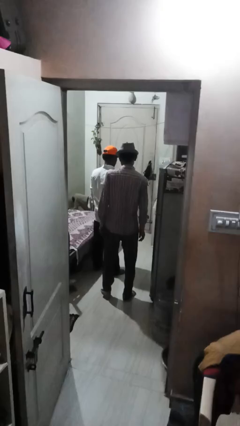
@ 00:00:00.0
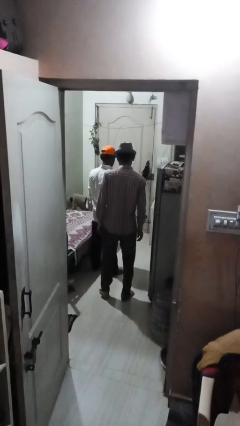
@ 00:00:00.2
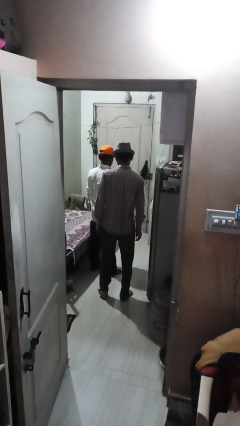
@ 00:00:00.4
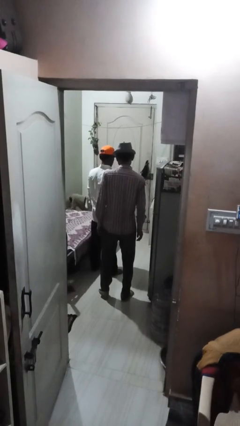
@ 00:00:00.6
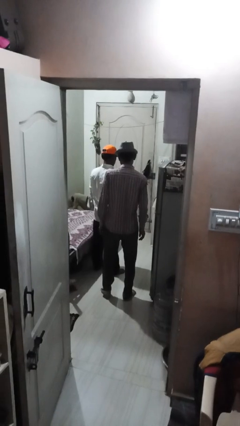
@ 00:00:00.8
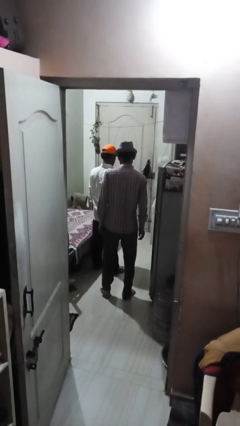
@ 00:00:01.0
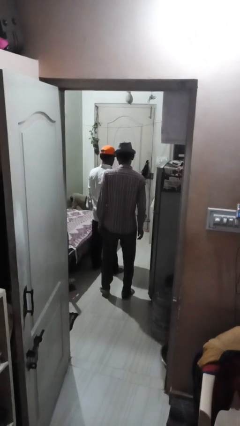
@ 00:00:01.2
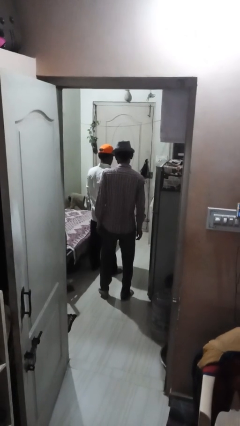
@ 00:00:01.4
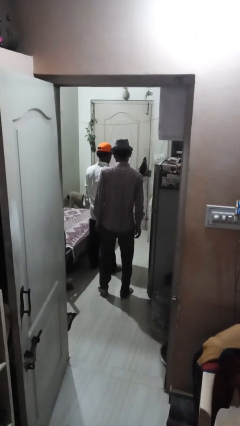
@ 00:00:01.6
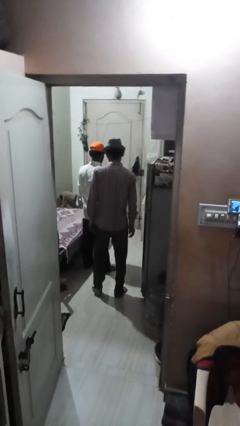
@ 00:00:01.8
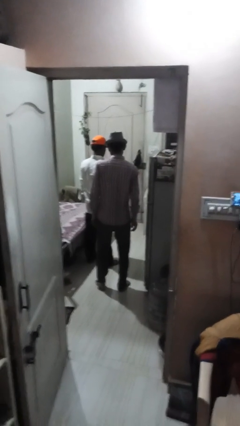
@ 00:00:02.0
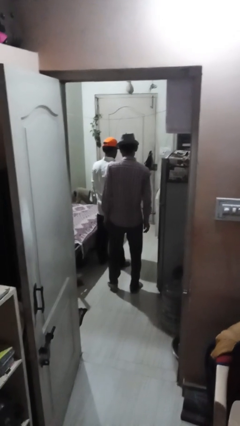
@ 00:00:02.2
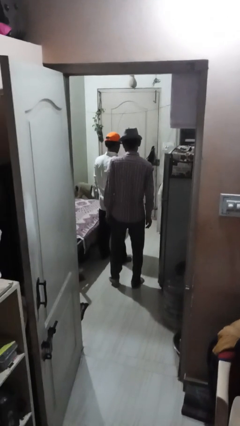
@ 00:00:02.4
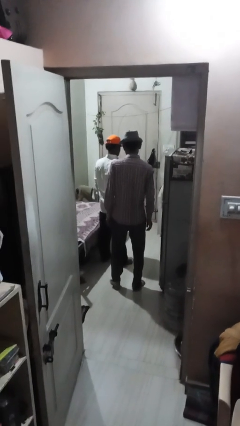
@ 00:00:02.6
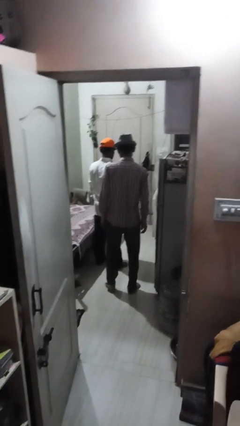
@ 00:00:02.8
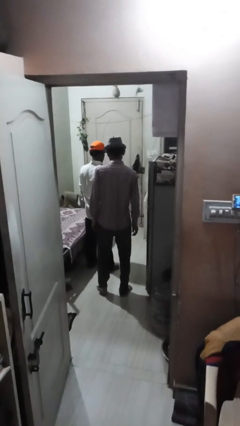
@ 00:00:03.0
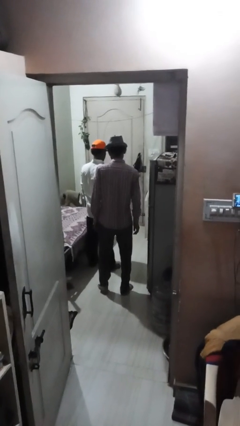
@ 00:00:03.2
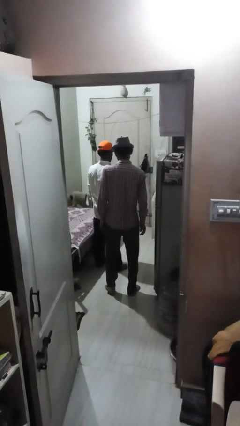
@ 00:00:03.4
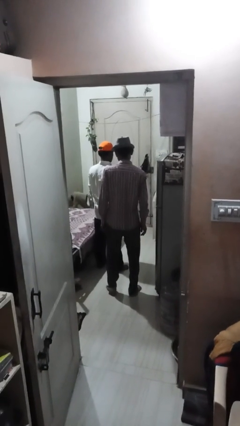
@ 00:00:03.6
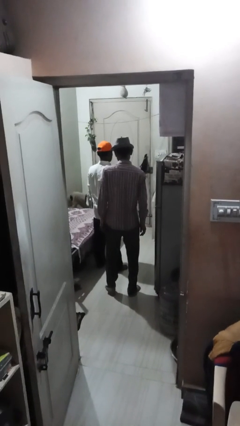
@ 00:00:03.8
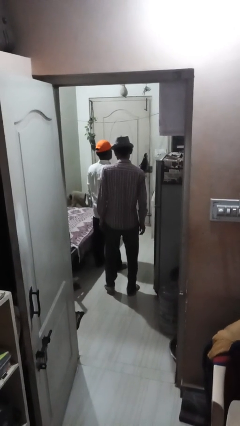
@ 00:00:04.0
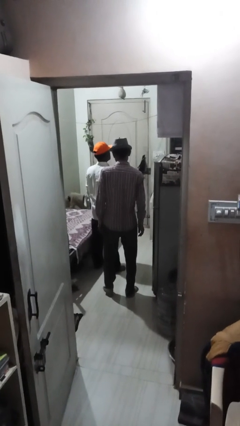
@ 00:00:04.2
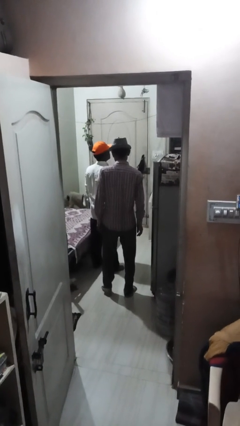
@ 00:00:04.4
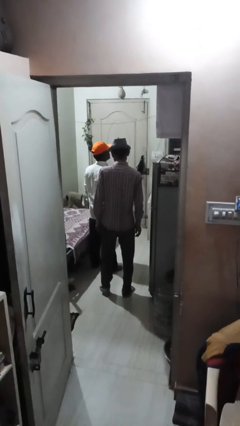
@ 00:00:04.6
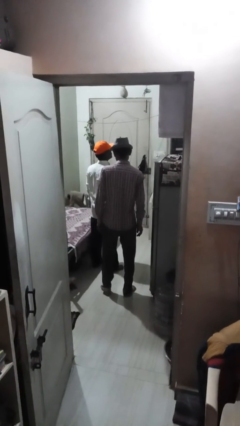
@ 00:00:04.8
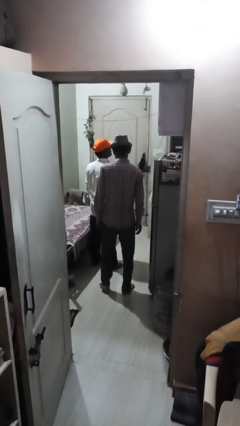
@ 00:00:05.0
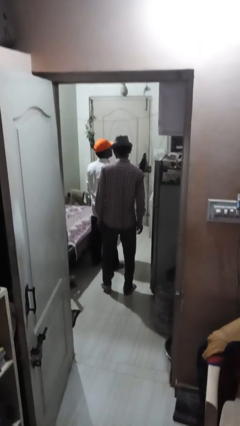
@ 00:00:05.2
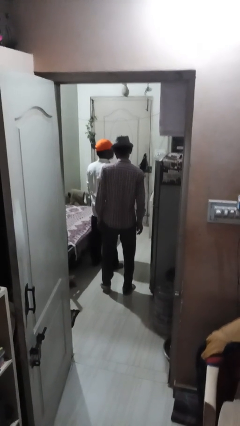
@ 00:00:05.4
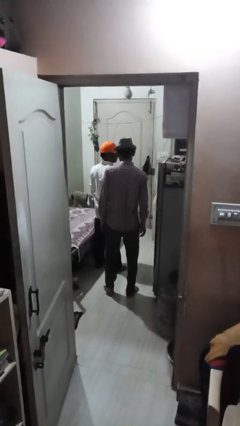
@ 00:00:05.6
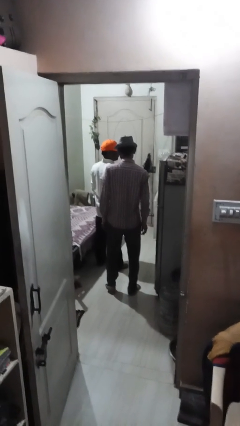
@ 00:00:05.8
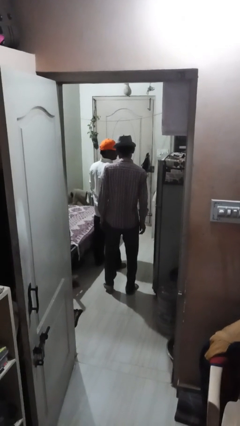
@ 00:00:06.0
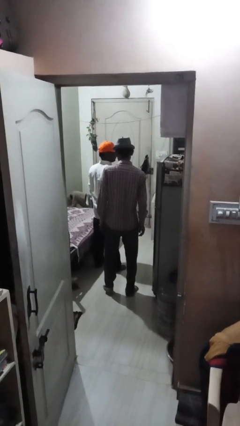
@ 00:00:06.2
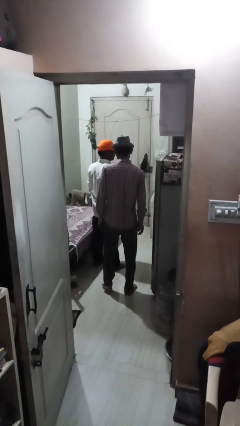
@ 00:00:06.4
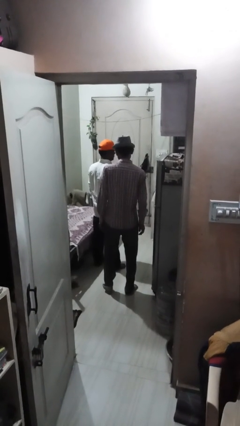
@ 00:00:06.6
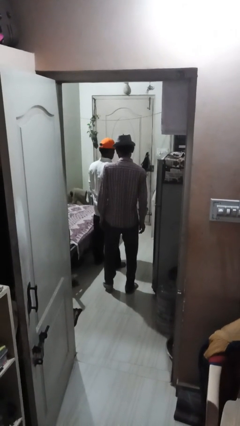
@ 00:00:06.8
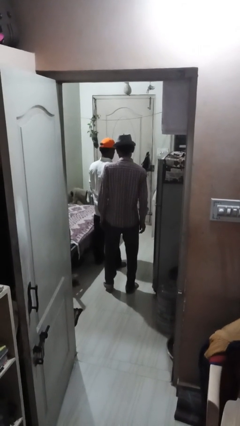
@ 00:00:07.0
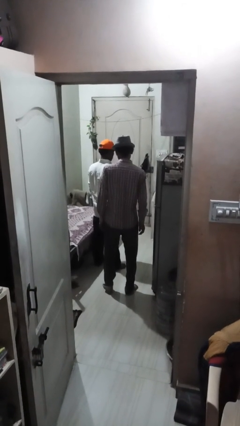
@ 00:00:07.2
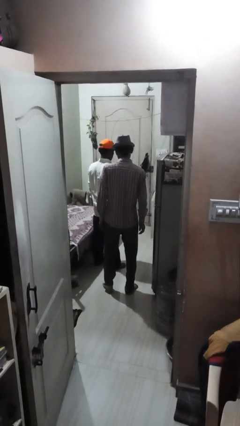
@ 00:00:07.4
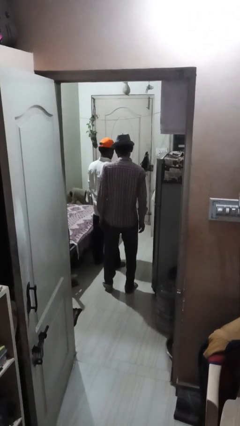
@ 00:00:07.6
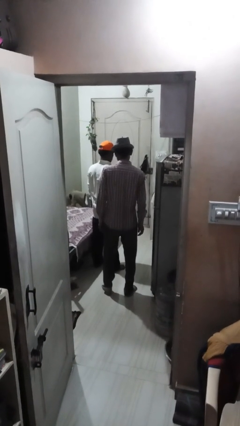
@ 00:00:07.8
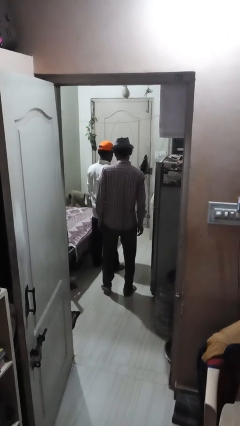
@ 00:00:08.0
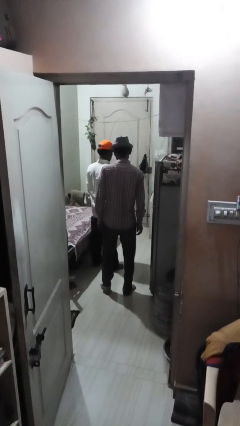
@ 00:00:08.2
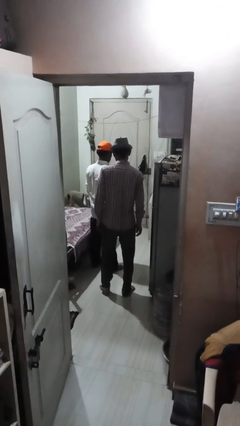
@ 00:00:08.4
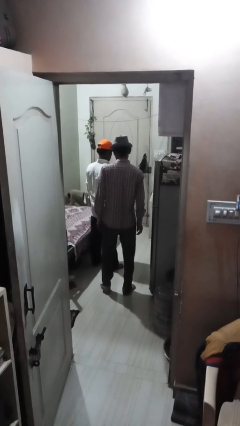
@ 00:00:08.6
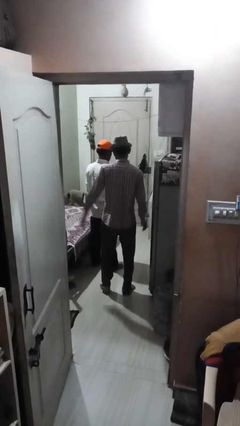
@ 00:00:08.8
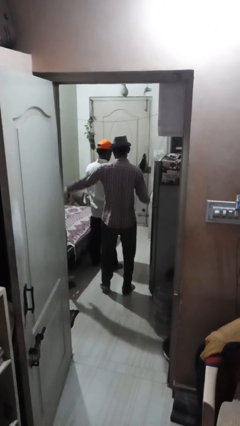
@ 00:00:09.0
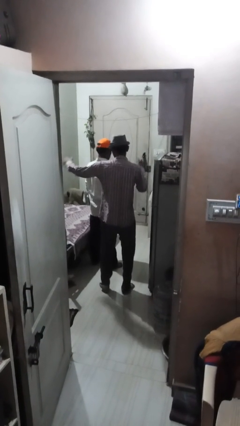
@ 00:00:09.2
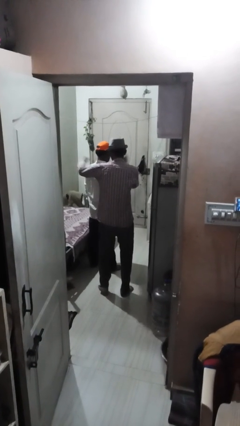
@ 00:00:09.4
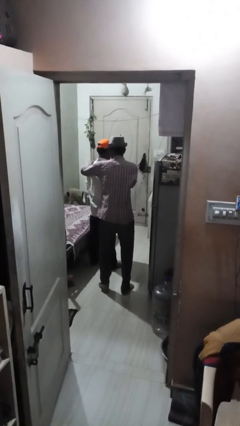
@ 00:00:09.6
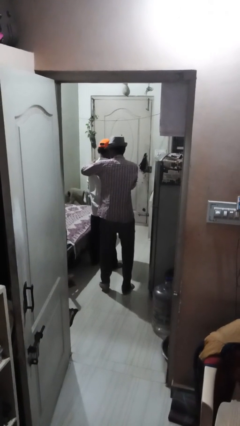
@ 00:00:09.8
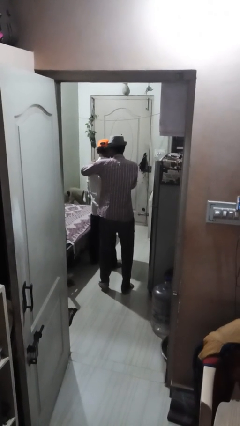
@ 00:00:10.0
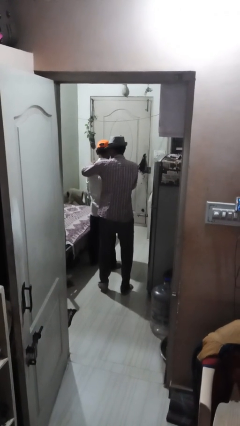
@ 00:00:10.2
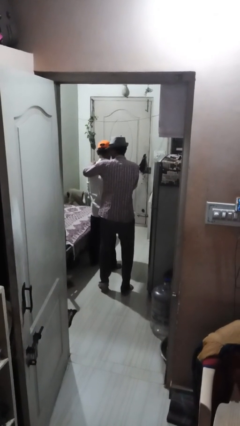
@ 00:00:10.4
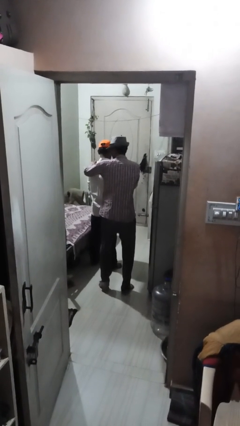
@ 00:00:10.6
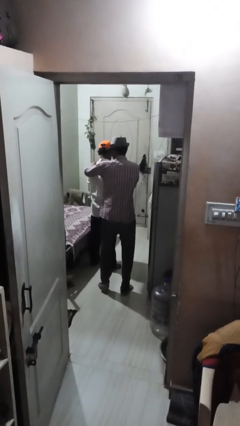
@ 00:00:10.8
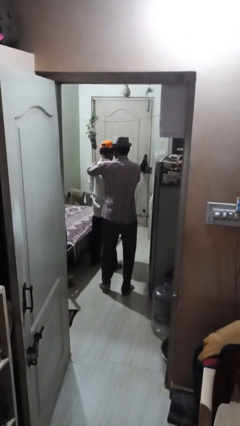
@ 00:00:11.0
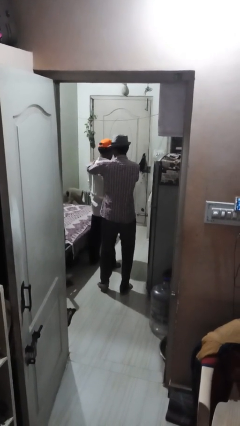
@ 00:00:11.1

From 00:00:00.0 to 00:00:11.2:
person pounds shoulders of person

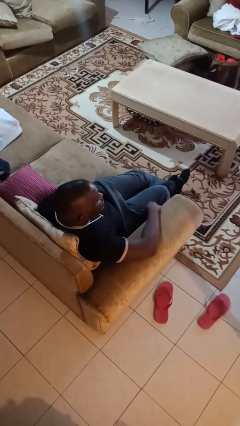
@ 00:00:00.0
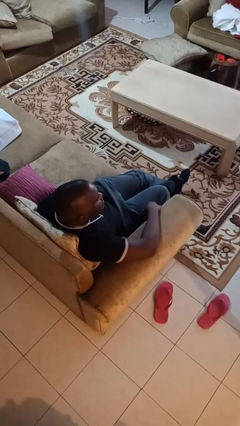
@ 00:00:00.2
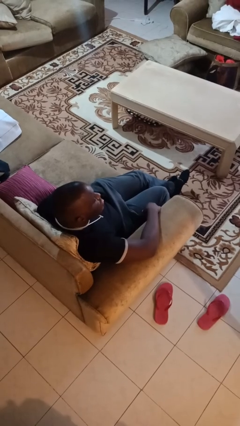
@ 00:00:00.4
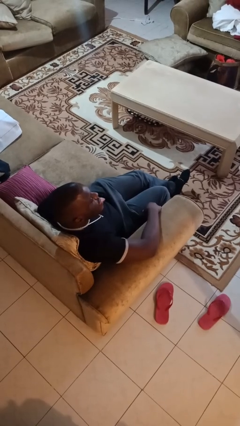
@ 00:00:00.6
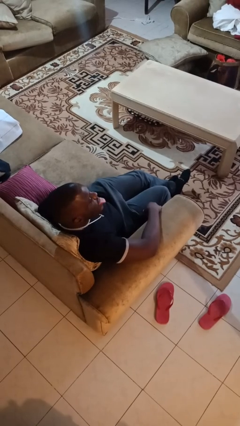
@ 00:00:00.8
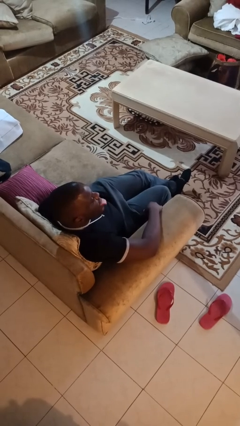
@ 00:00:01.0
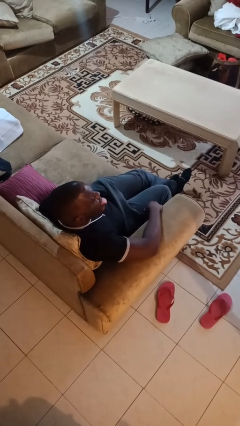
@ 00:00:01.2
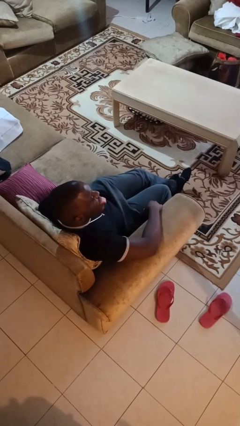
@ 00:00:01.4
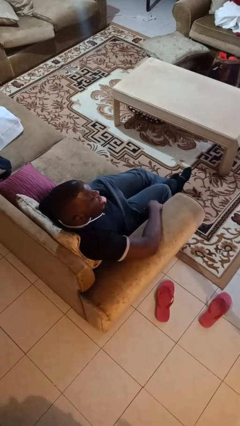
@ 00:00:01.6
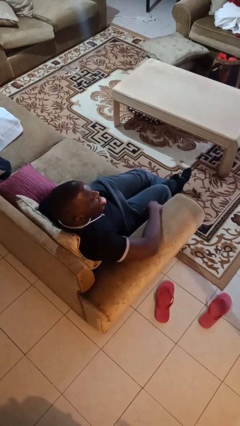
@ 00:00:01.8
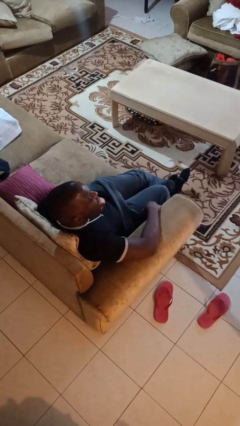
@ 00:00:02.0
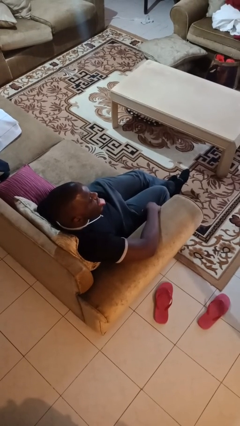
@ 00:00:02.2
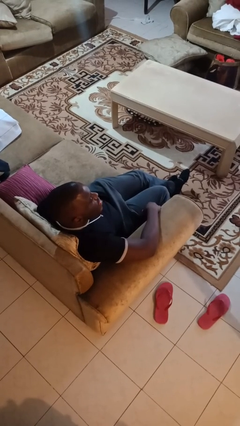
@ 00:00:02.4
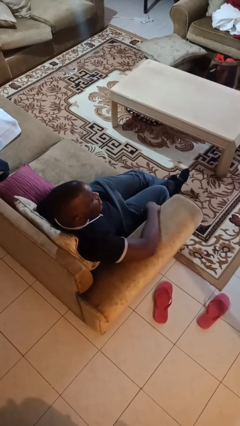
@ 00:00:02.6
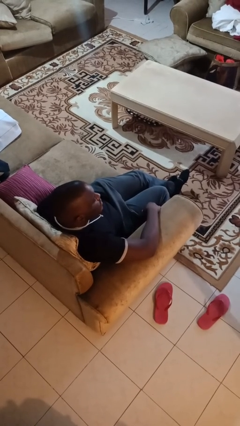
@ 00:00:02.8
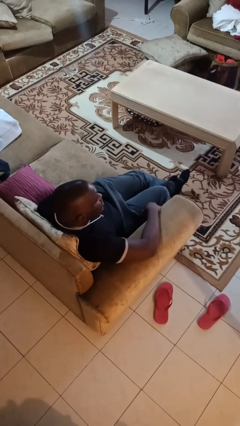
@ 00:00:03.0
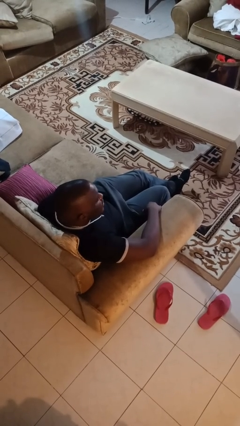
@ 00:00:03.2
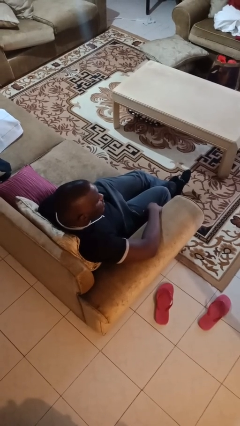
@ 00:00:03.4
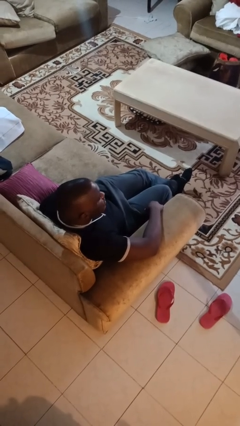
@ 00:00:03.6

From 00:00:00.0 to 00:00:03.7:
person sticks out tongue

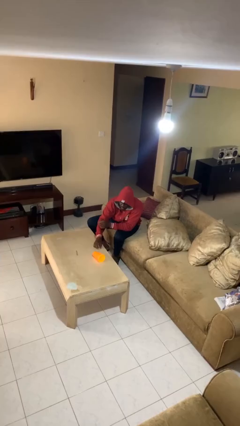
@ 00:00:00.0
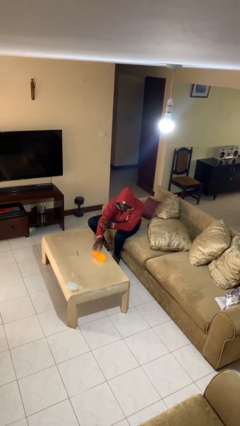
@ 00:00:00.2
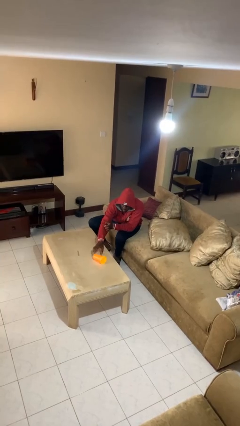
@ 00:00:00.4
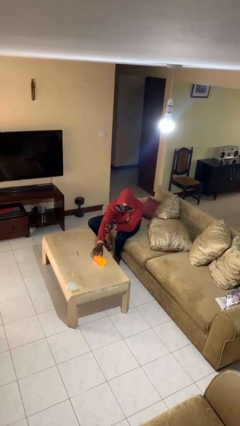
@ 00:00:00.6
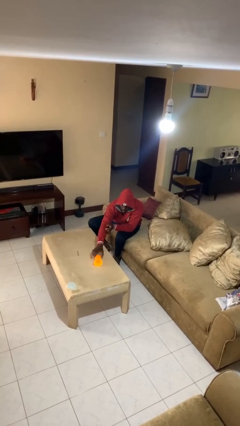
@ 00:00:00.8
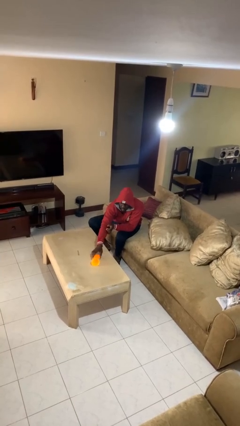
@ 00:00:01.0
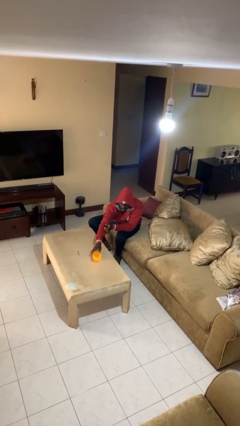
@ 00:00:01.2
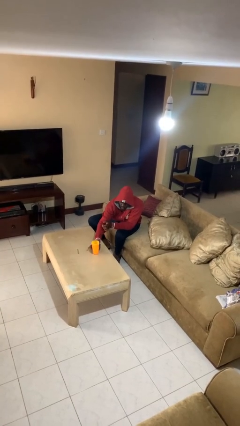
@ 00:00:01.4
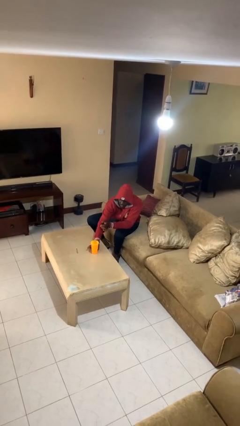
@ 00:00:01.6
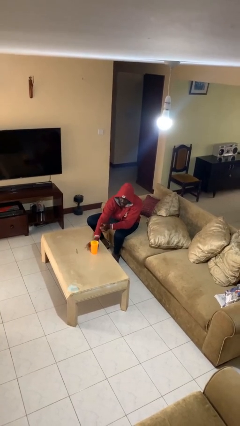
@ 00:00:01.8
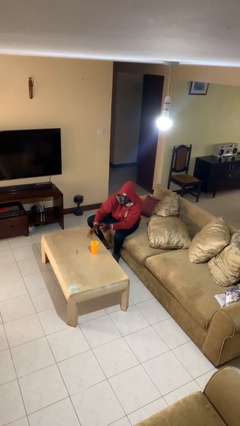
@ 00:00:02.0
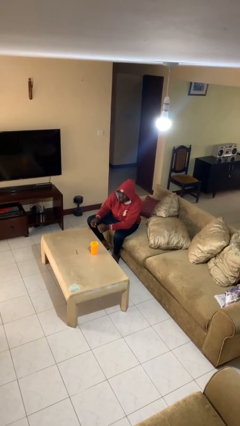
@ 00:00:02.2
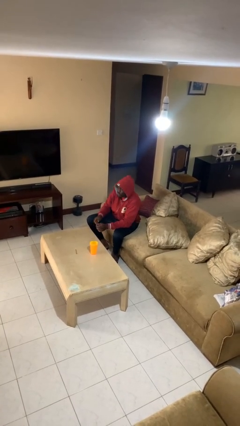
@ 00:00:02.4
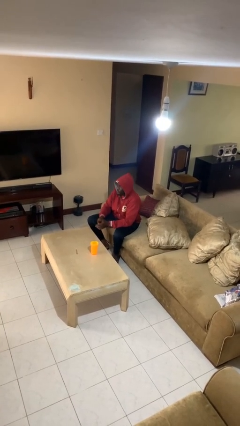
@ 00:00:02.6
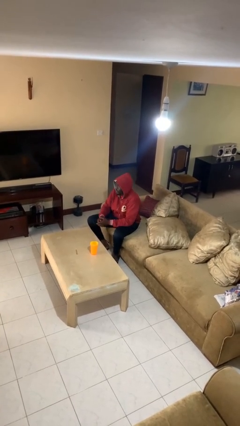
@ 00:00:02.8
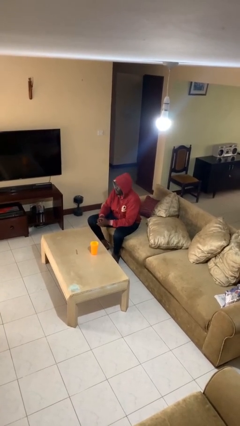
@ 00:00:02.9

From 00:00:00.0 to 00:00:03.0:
person sets upright glass
